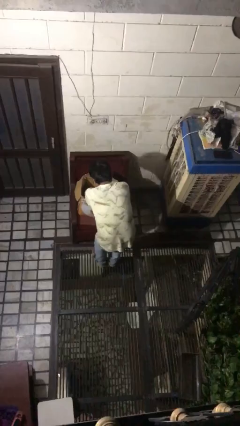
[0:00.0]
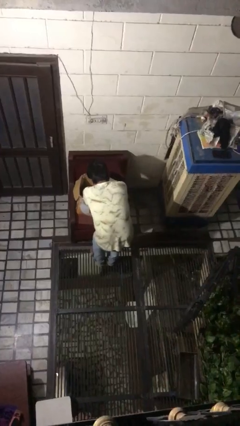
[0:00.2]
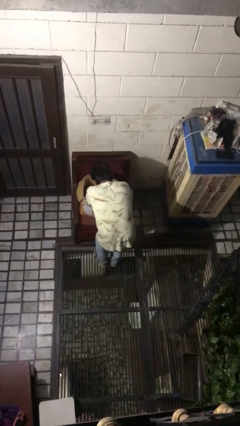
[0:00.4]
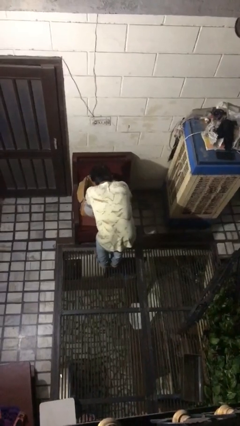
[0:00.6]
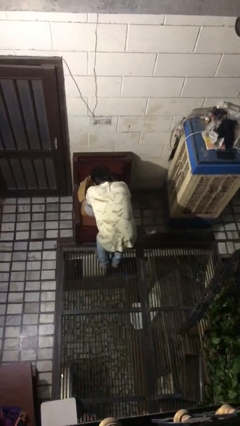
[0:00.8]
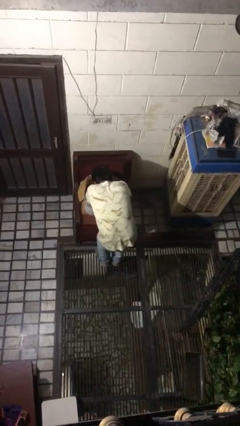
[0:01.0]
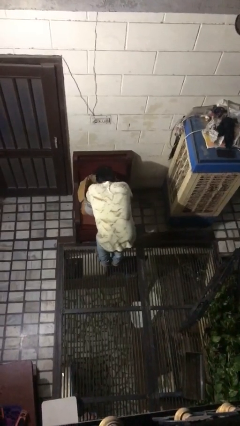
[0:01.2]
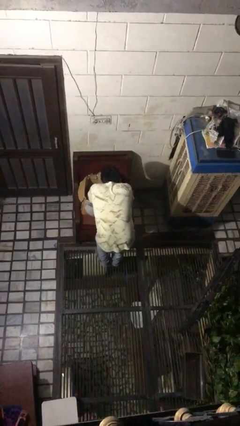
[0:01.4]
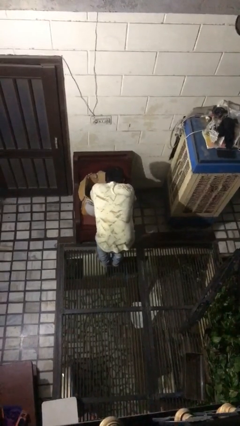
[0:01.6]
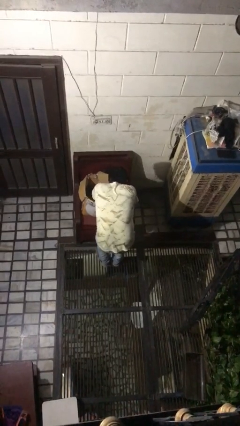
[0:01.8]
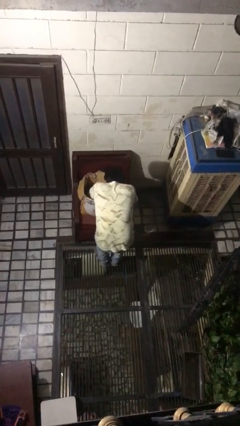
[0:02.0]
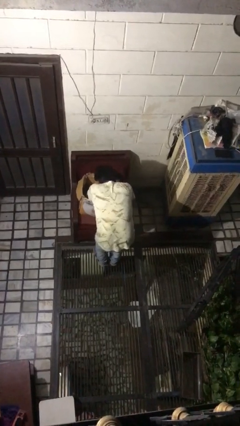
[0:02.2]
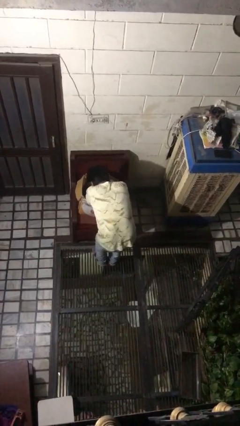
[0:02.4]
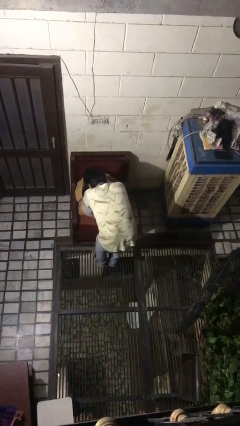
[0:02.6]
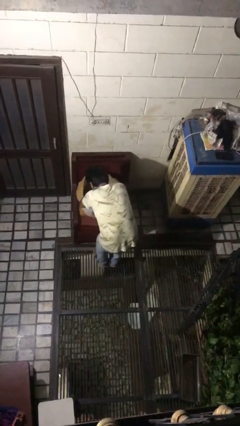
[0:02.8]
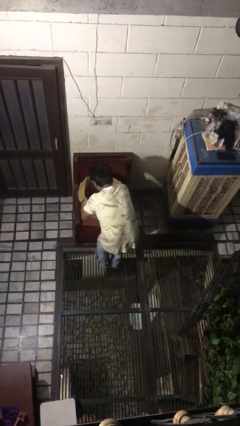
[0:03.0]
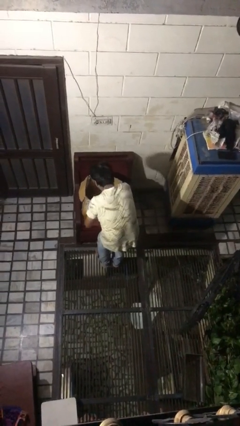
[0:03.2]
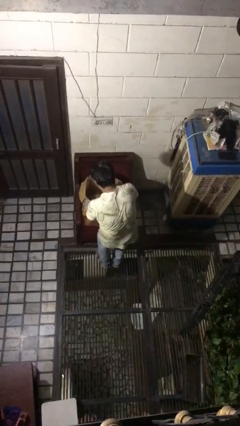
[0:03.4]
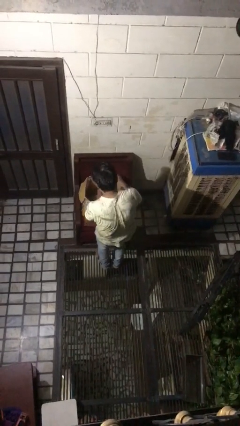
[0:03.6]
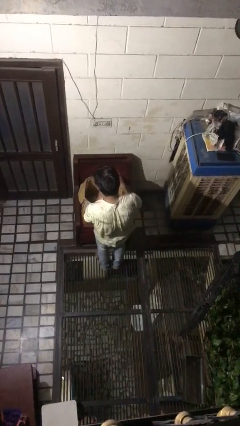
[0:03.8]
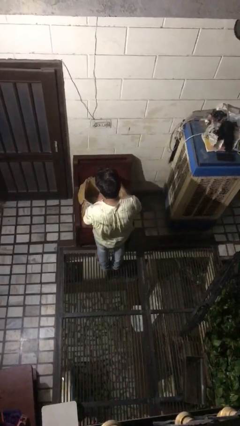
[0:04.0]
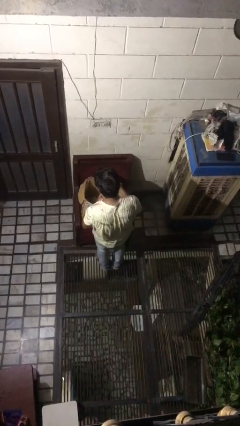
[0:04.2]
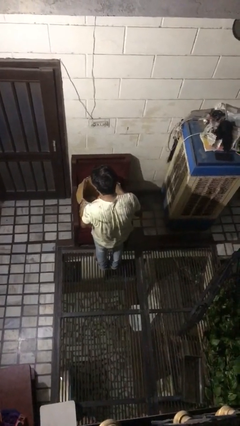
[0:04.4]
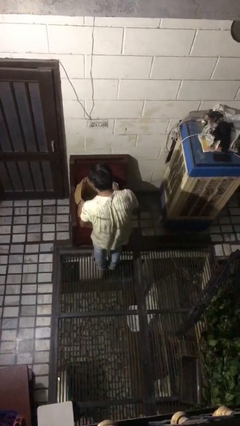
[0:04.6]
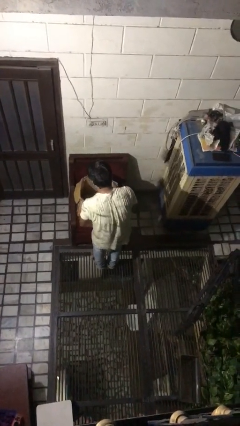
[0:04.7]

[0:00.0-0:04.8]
person searches in box

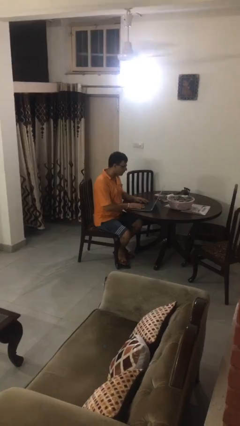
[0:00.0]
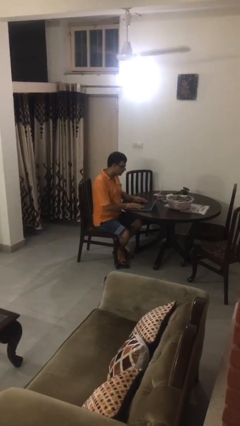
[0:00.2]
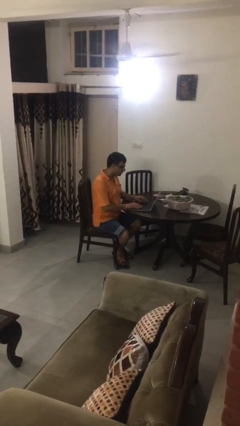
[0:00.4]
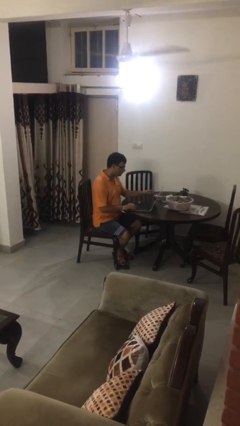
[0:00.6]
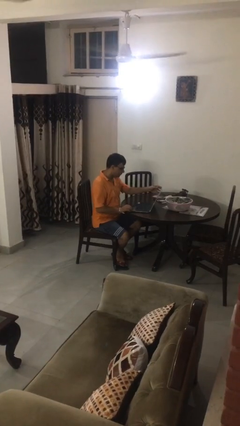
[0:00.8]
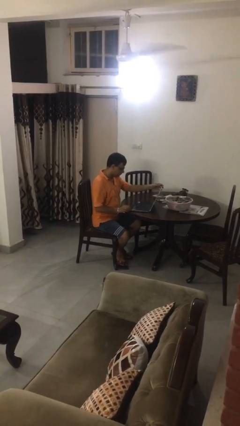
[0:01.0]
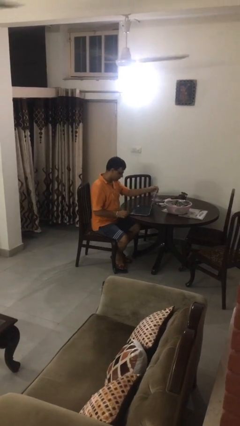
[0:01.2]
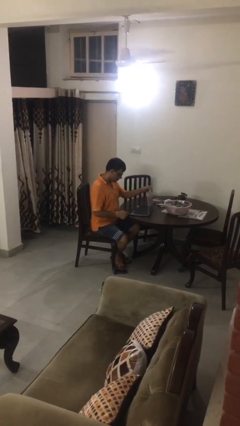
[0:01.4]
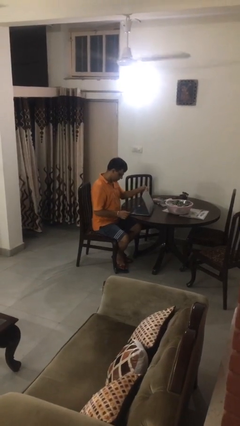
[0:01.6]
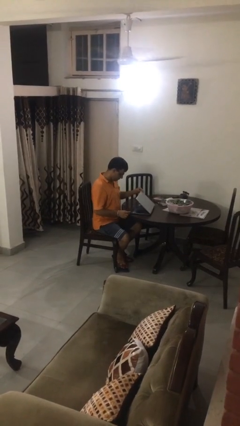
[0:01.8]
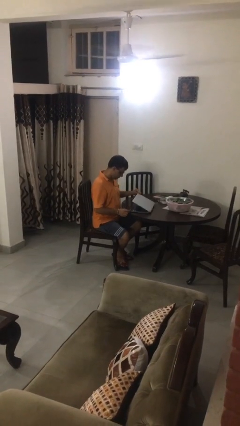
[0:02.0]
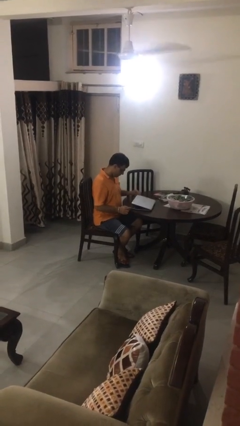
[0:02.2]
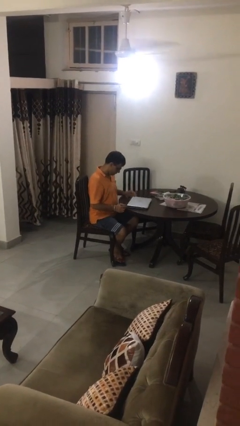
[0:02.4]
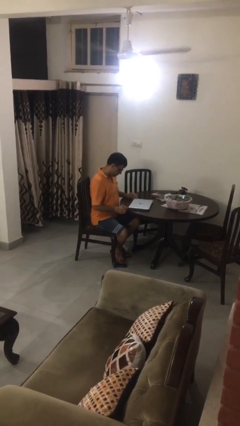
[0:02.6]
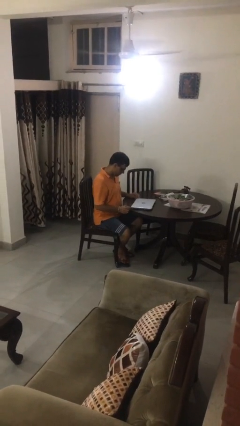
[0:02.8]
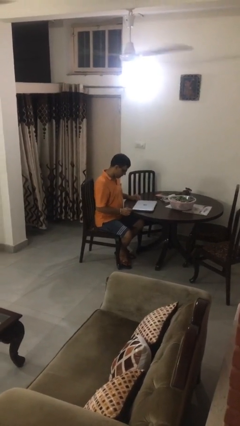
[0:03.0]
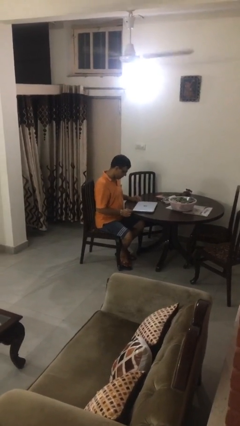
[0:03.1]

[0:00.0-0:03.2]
person closes laptop

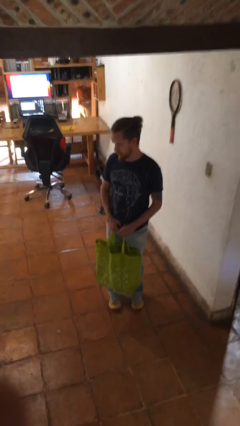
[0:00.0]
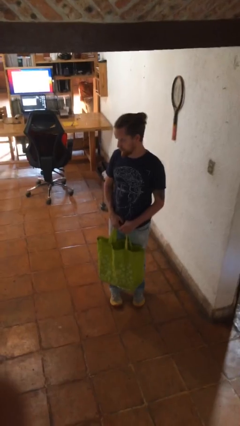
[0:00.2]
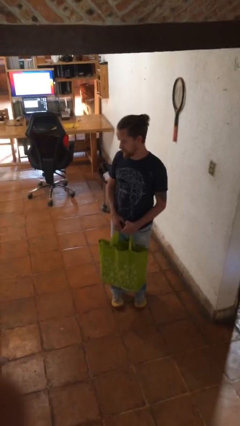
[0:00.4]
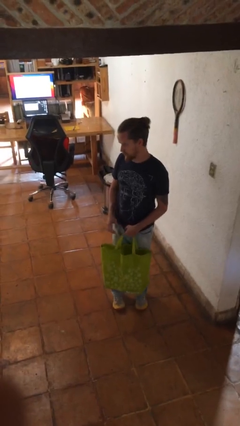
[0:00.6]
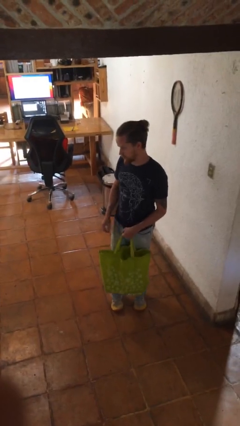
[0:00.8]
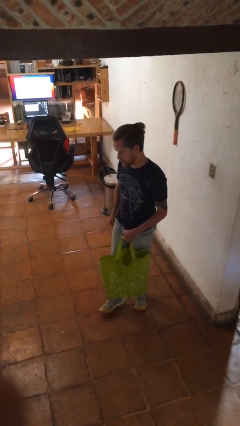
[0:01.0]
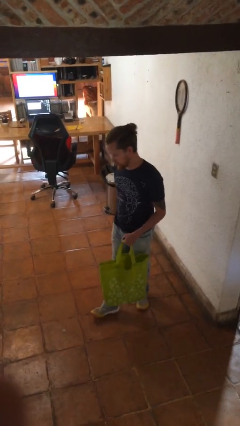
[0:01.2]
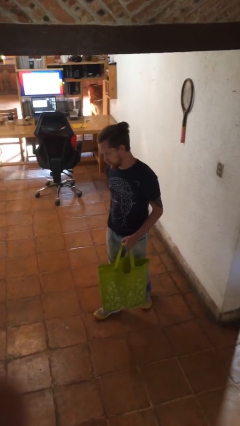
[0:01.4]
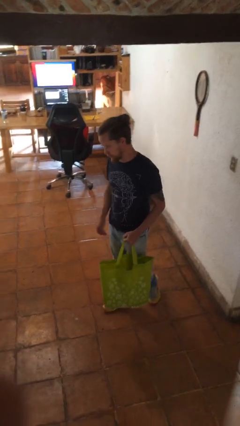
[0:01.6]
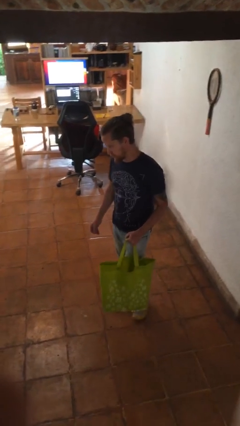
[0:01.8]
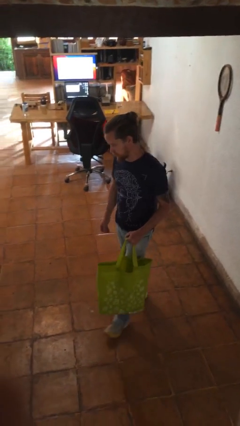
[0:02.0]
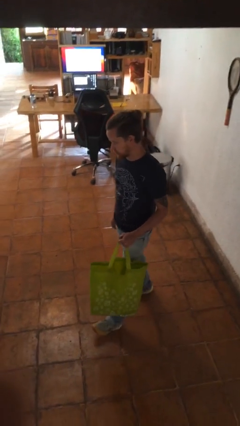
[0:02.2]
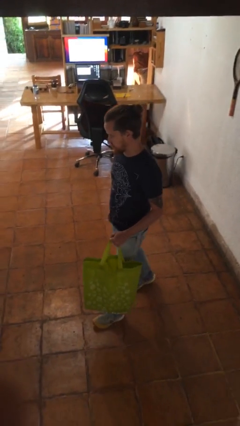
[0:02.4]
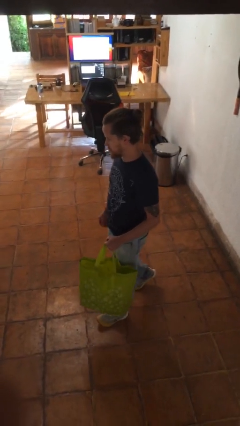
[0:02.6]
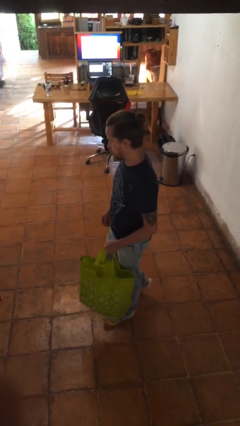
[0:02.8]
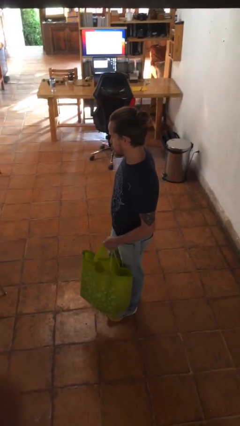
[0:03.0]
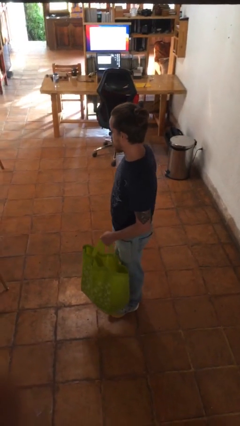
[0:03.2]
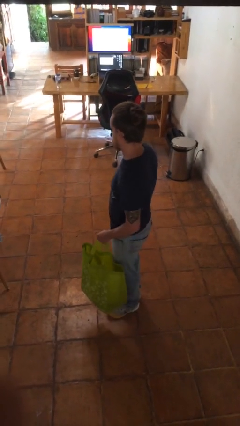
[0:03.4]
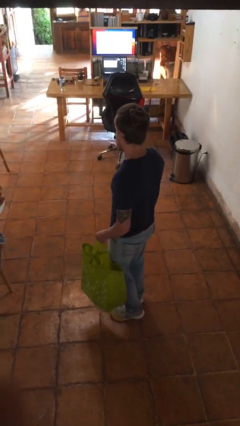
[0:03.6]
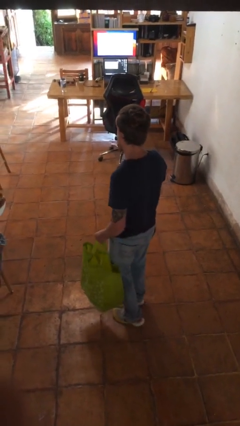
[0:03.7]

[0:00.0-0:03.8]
person carries groceries

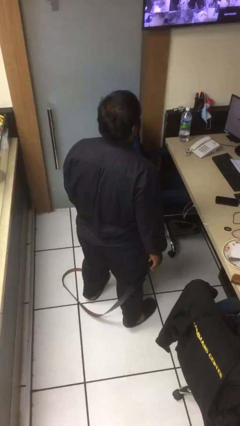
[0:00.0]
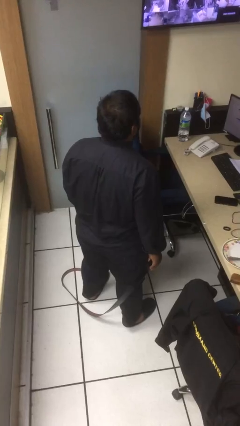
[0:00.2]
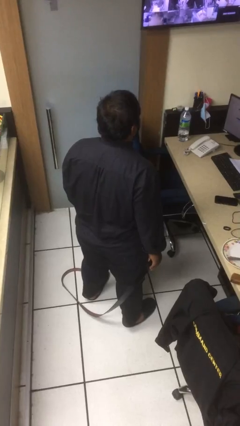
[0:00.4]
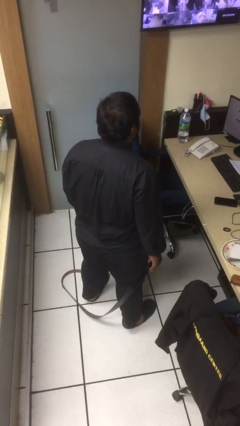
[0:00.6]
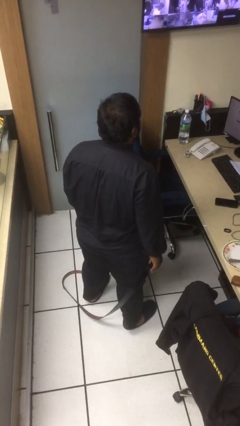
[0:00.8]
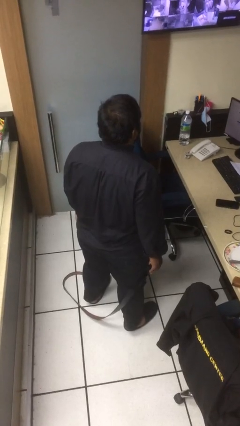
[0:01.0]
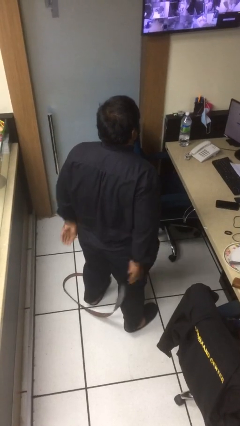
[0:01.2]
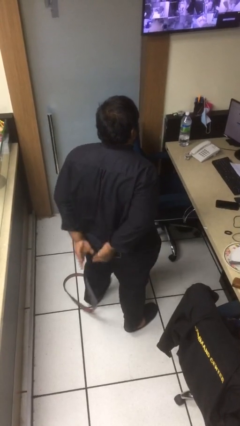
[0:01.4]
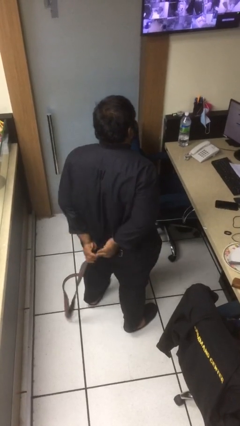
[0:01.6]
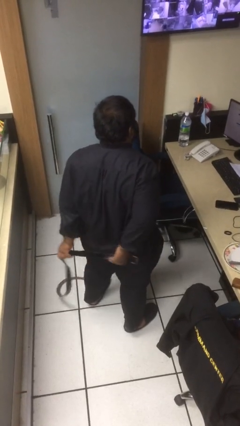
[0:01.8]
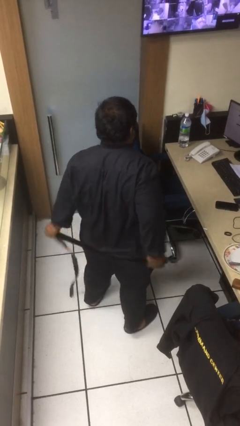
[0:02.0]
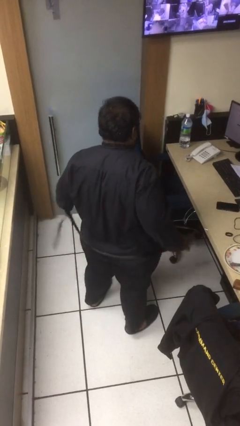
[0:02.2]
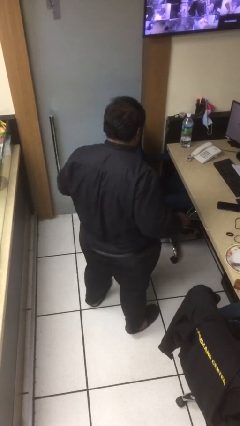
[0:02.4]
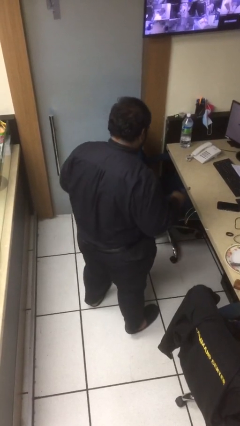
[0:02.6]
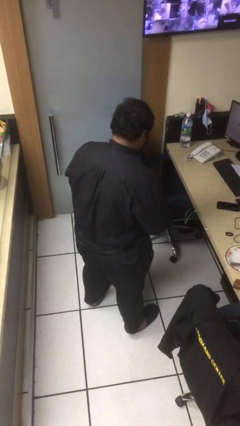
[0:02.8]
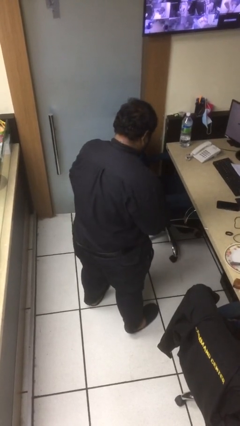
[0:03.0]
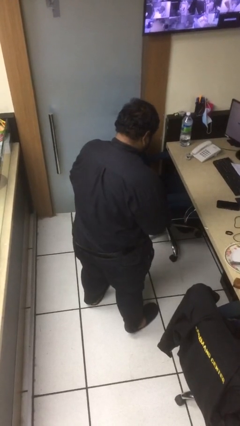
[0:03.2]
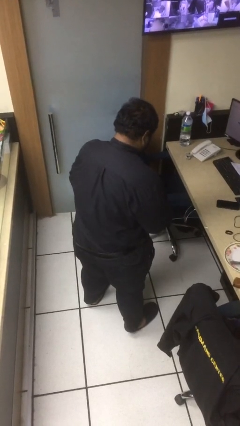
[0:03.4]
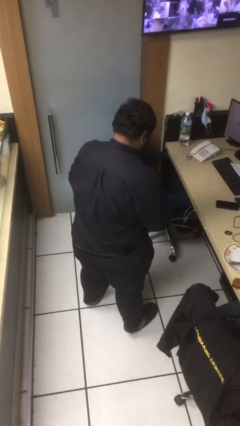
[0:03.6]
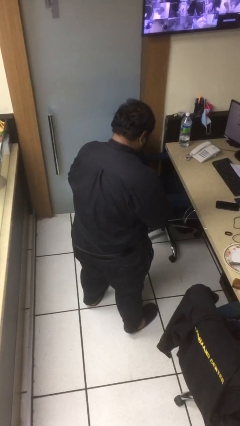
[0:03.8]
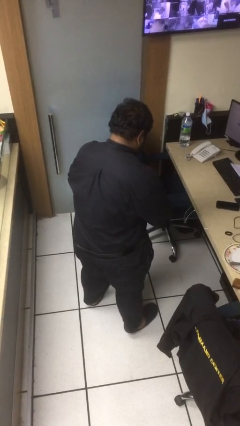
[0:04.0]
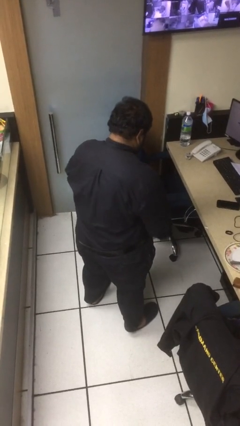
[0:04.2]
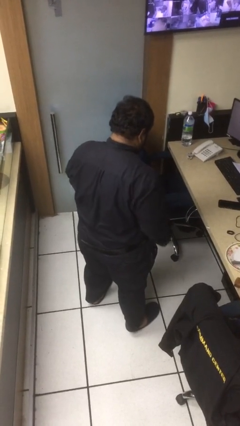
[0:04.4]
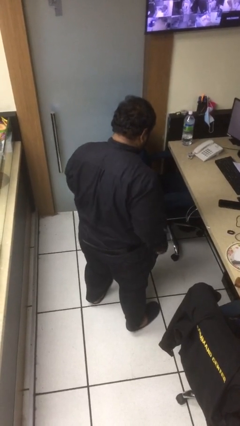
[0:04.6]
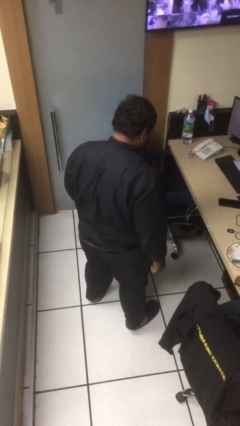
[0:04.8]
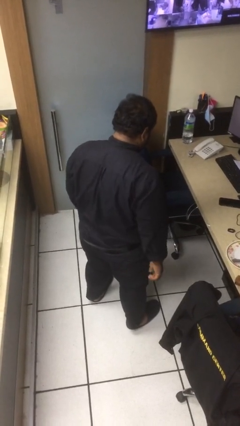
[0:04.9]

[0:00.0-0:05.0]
person puts on belt

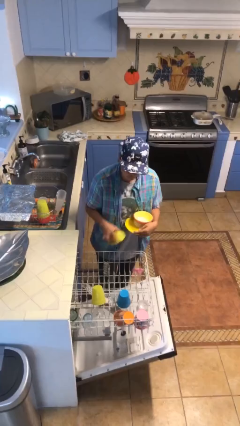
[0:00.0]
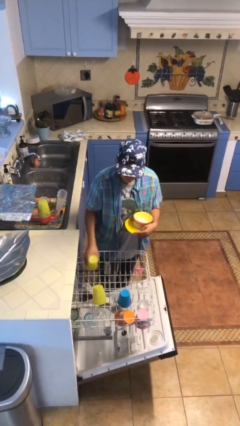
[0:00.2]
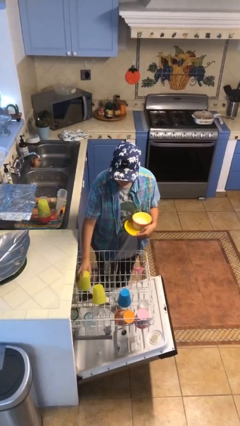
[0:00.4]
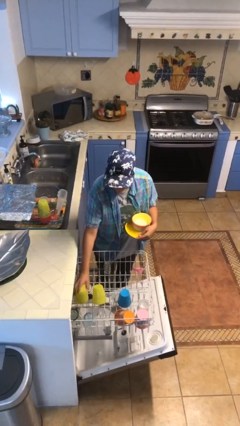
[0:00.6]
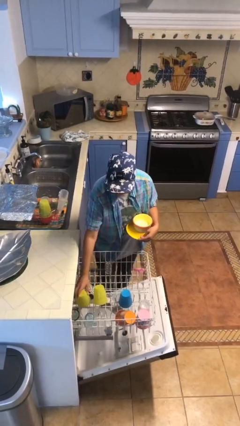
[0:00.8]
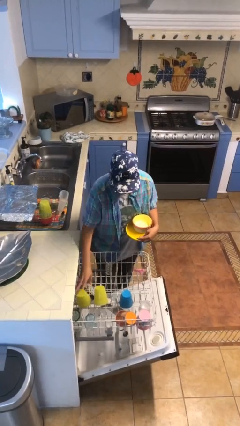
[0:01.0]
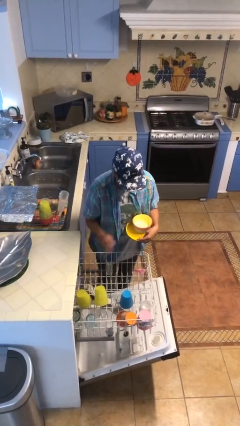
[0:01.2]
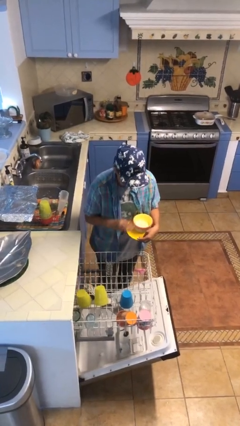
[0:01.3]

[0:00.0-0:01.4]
person loads dishwasher
